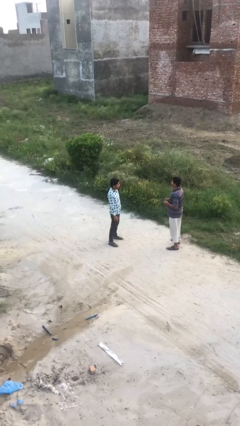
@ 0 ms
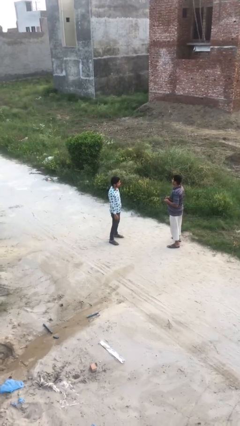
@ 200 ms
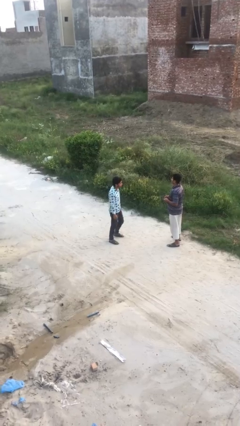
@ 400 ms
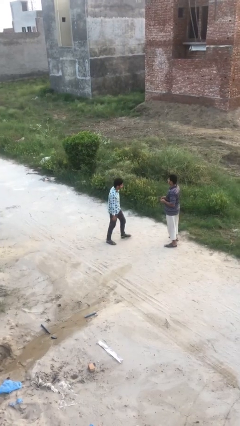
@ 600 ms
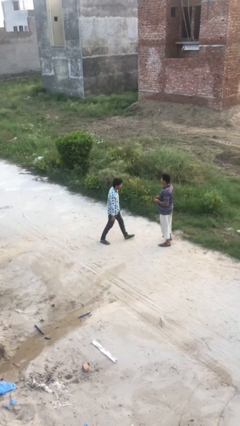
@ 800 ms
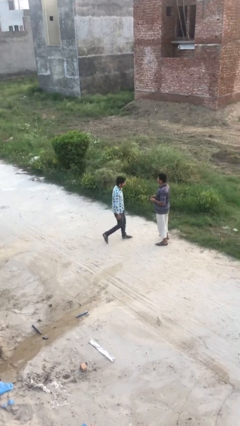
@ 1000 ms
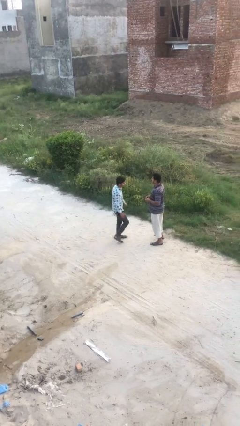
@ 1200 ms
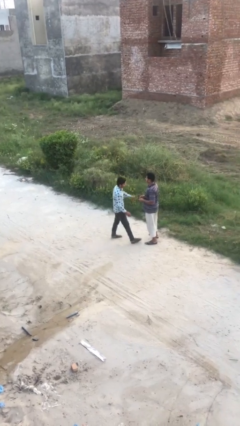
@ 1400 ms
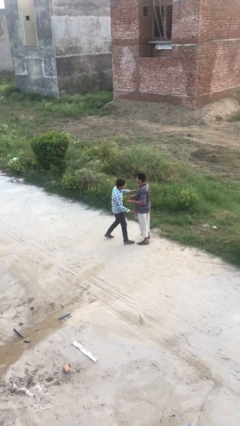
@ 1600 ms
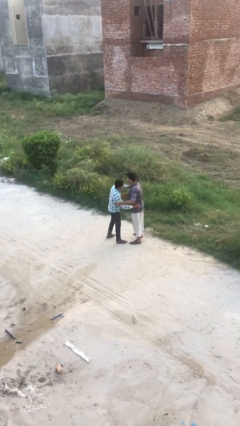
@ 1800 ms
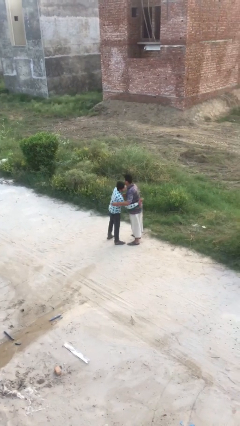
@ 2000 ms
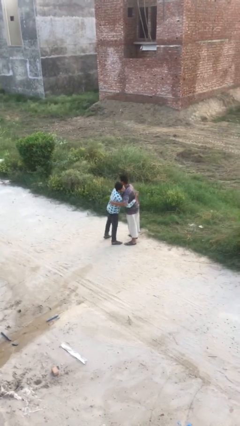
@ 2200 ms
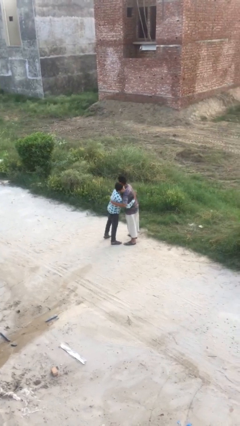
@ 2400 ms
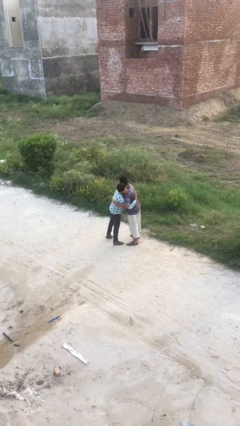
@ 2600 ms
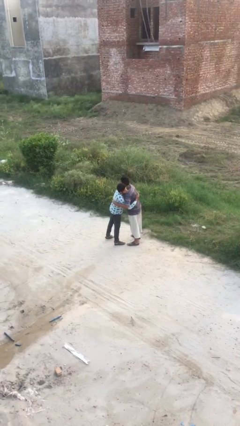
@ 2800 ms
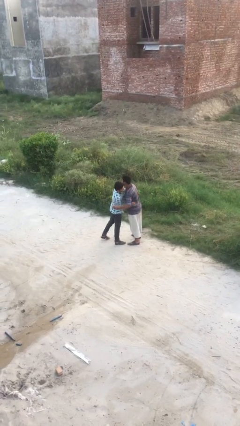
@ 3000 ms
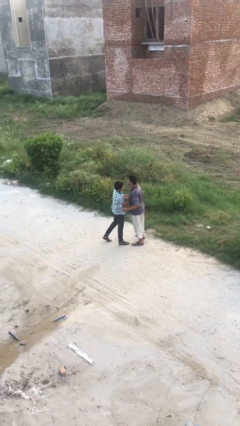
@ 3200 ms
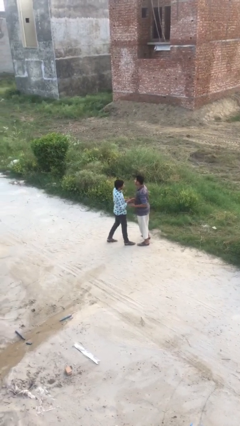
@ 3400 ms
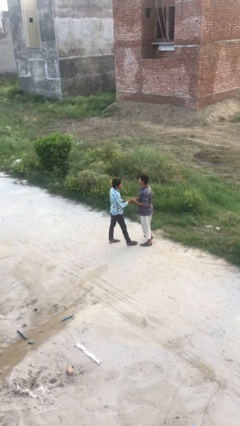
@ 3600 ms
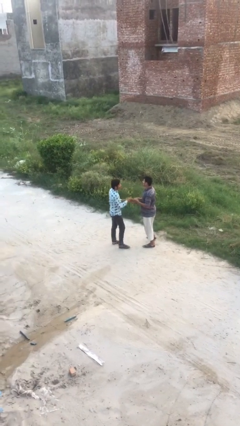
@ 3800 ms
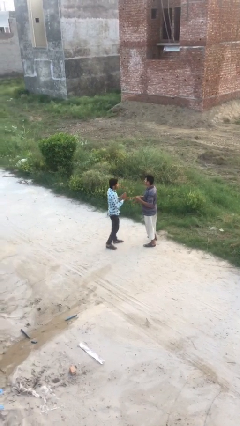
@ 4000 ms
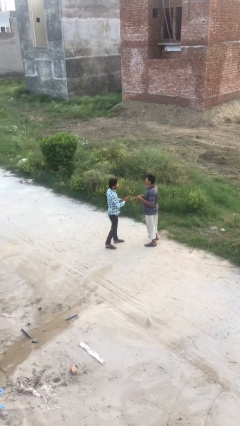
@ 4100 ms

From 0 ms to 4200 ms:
person embraces person

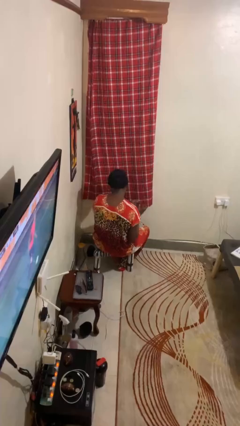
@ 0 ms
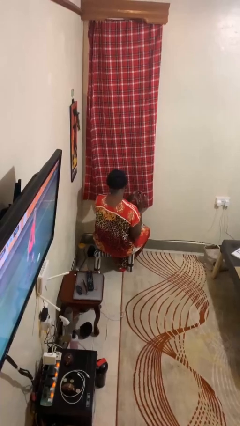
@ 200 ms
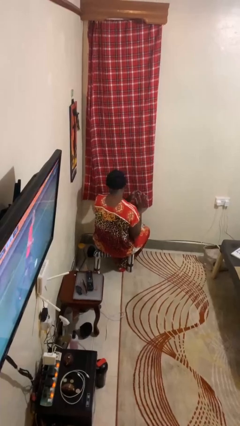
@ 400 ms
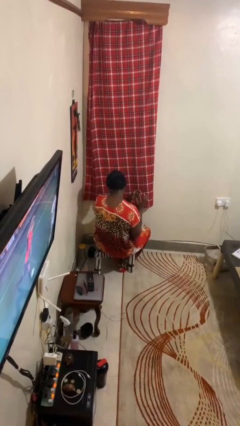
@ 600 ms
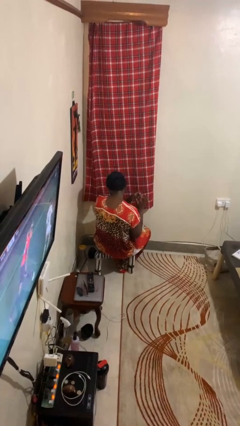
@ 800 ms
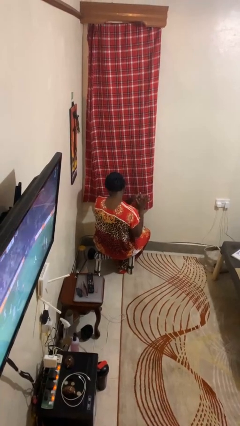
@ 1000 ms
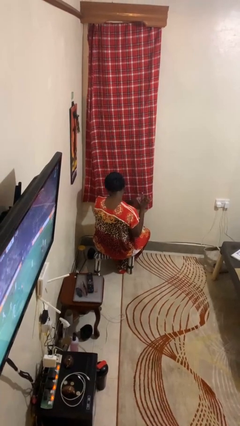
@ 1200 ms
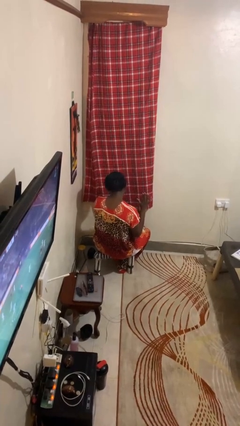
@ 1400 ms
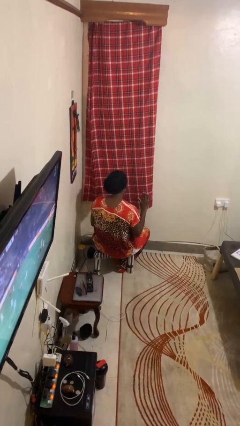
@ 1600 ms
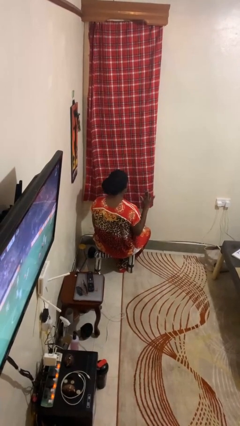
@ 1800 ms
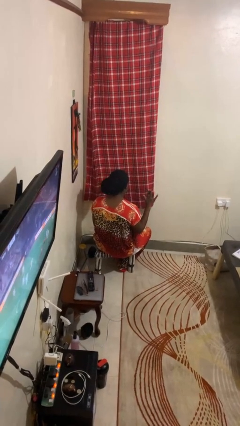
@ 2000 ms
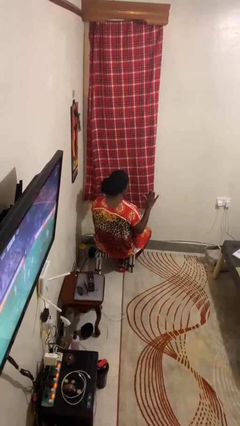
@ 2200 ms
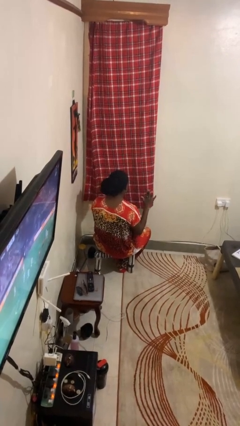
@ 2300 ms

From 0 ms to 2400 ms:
person puts on ring

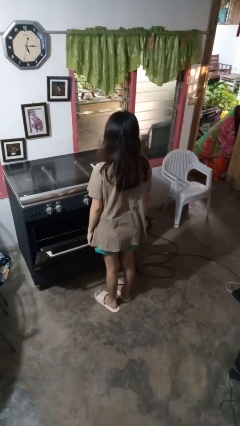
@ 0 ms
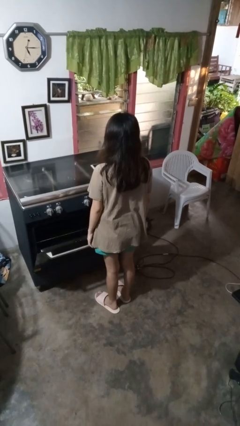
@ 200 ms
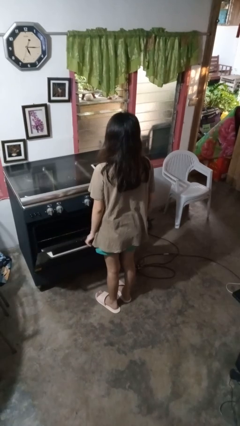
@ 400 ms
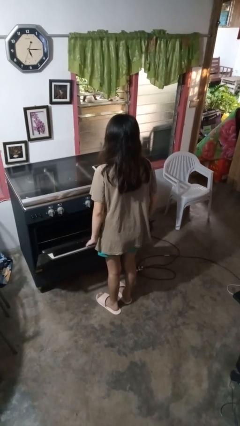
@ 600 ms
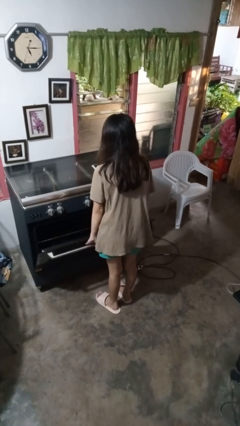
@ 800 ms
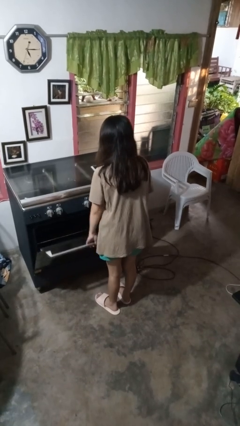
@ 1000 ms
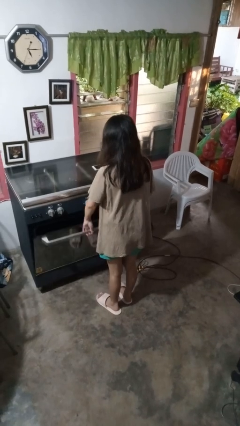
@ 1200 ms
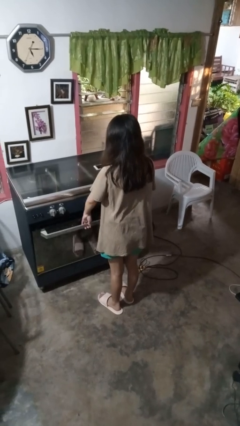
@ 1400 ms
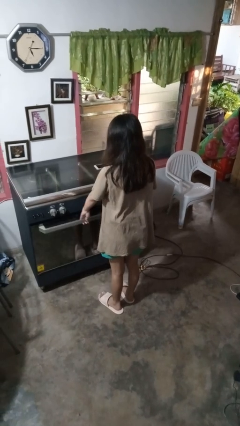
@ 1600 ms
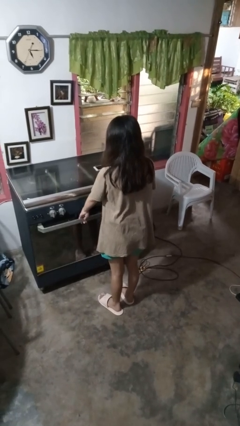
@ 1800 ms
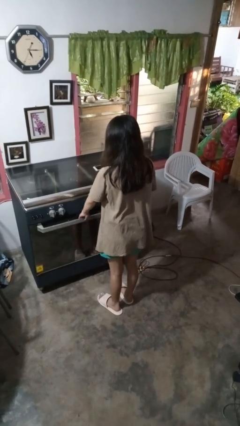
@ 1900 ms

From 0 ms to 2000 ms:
person closes oven door

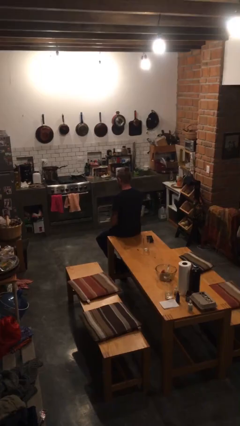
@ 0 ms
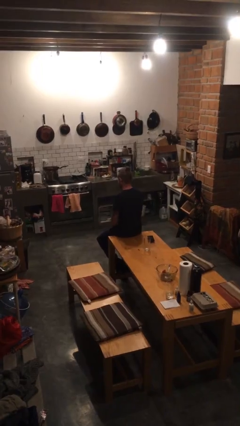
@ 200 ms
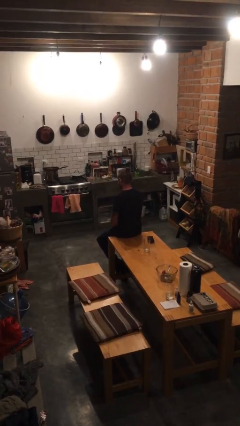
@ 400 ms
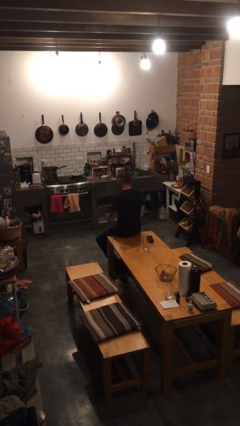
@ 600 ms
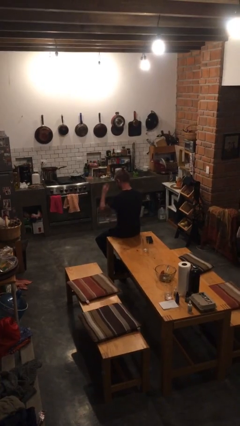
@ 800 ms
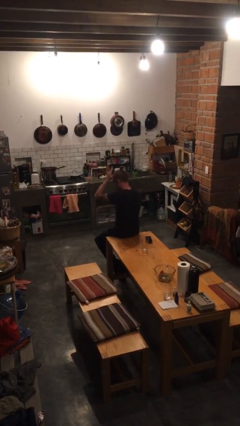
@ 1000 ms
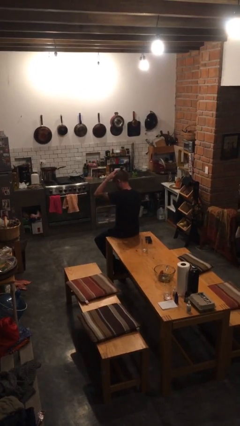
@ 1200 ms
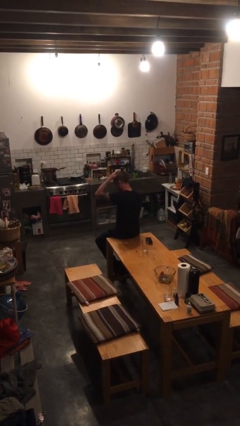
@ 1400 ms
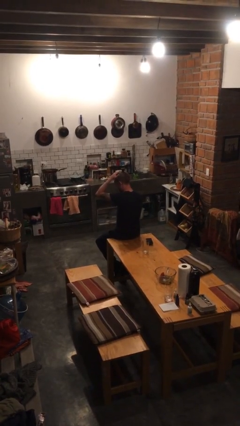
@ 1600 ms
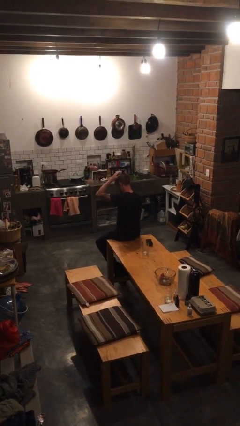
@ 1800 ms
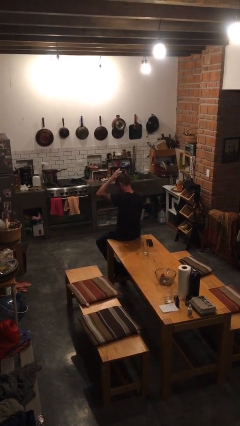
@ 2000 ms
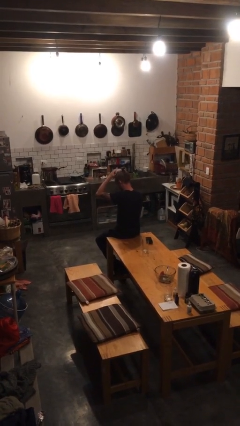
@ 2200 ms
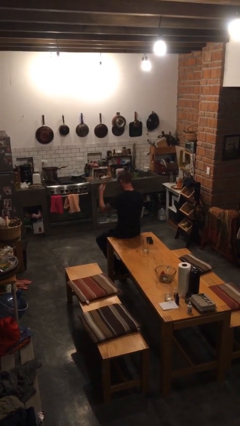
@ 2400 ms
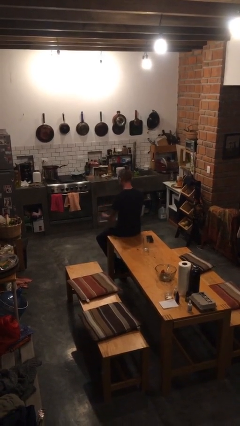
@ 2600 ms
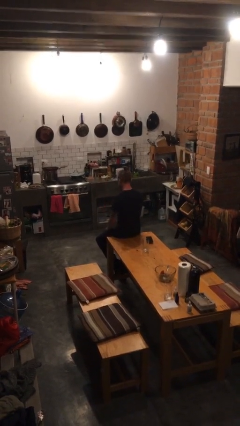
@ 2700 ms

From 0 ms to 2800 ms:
person pats head

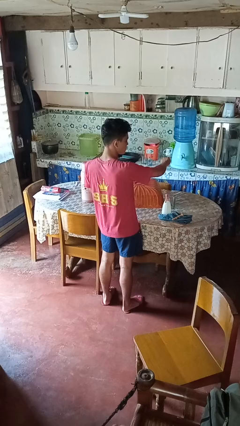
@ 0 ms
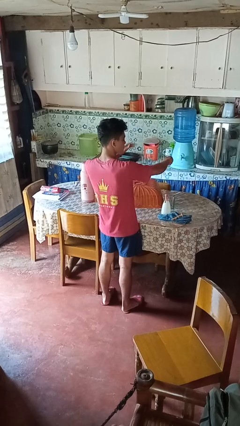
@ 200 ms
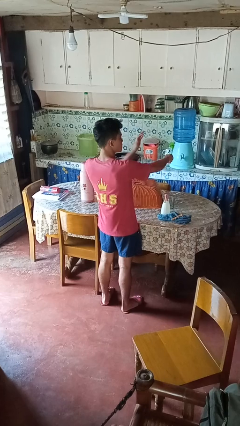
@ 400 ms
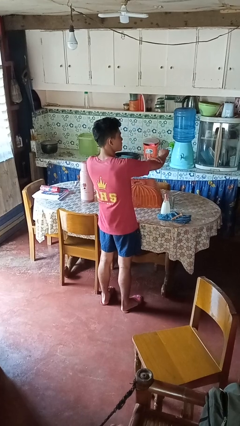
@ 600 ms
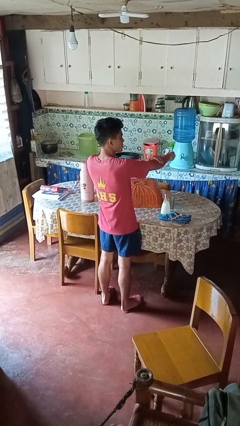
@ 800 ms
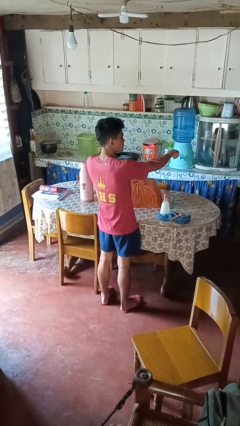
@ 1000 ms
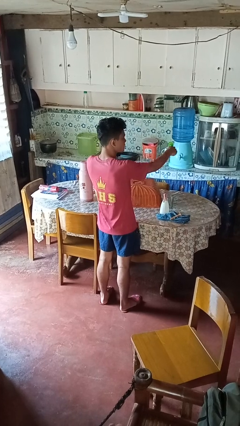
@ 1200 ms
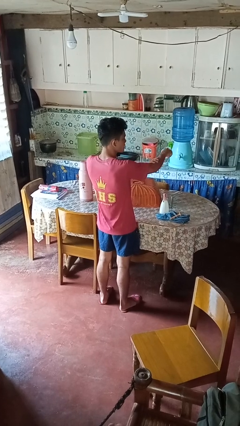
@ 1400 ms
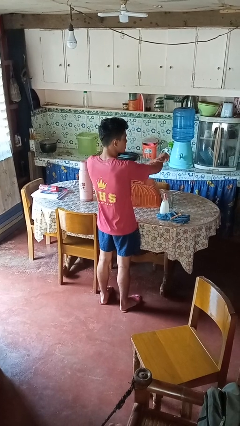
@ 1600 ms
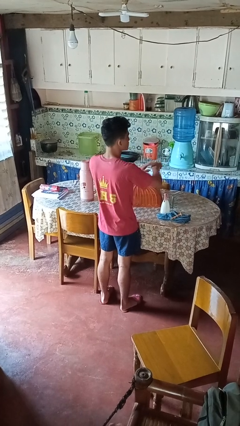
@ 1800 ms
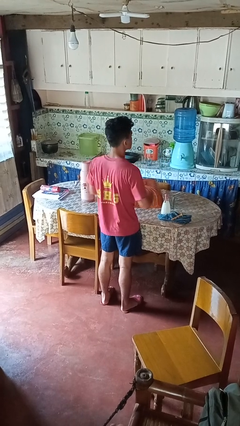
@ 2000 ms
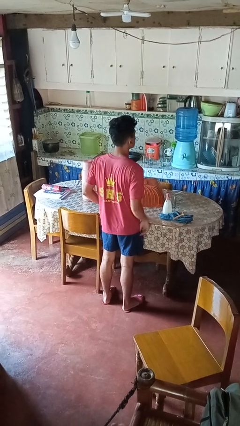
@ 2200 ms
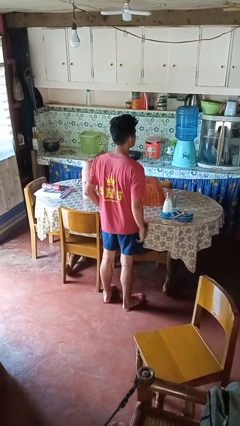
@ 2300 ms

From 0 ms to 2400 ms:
person swats bug

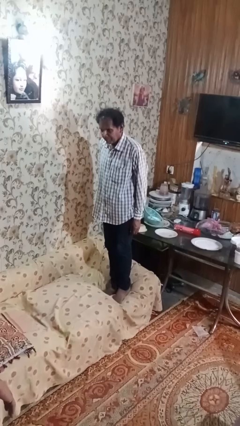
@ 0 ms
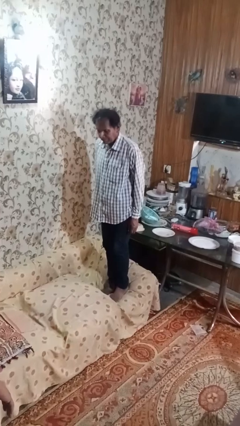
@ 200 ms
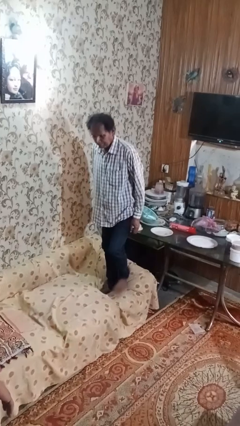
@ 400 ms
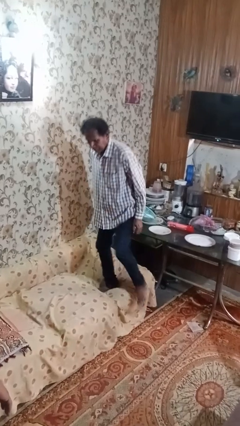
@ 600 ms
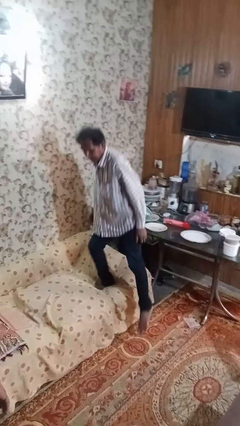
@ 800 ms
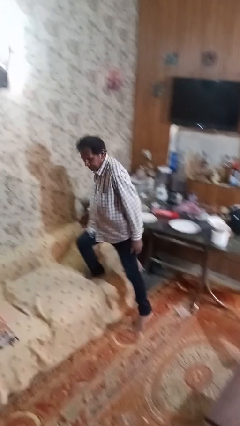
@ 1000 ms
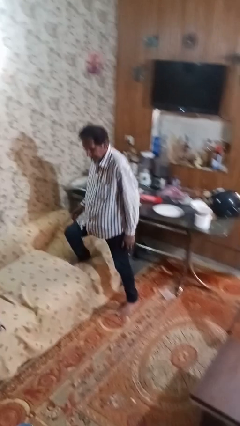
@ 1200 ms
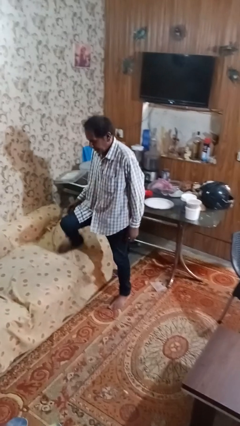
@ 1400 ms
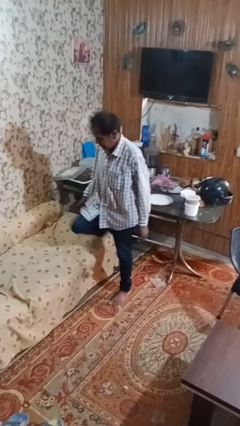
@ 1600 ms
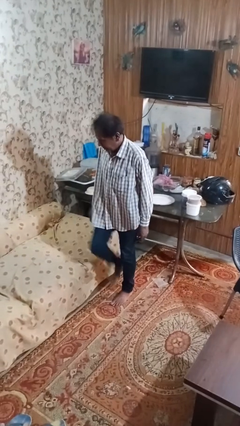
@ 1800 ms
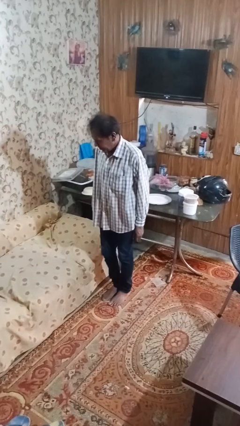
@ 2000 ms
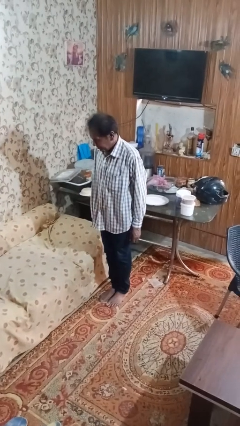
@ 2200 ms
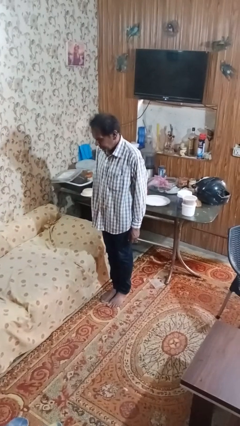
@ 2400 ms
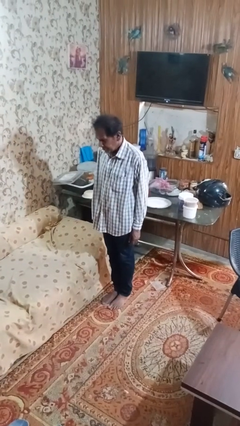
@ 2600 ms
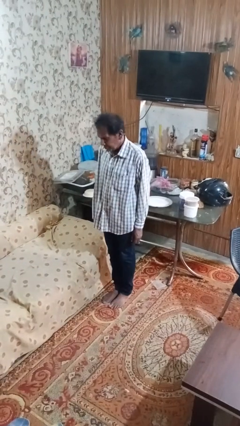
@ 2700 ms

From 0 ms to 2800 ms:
person climbs off couch

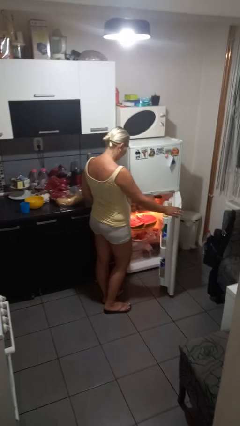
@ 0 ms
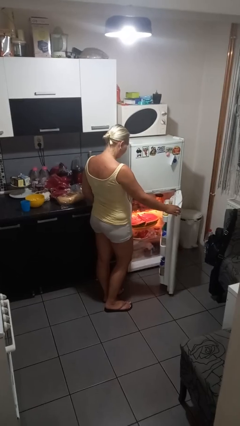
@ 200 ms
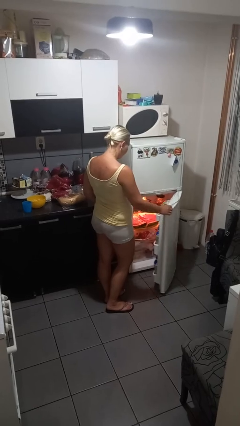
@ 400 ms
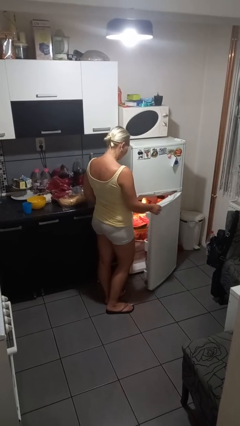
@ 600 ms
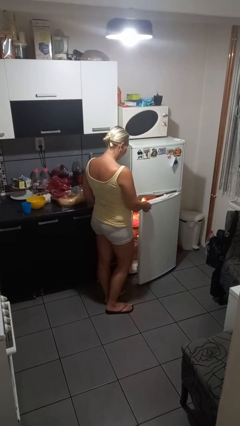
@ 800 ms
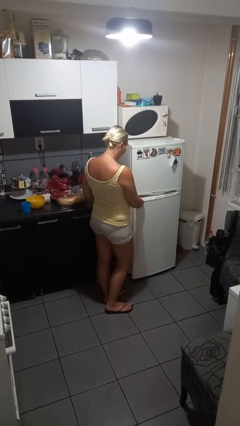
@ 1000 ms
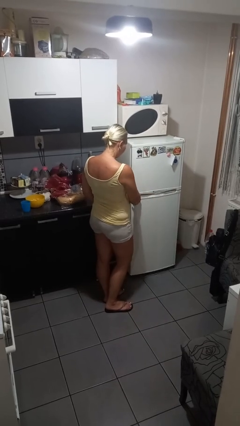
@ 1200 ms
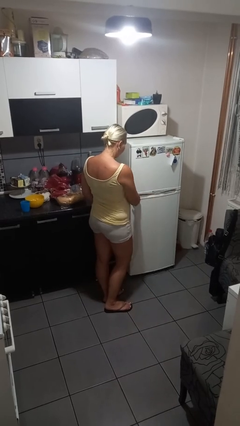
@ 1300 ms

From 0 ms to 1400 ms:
person closes refrigerator
